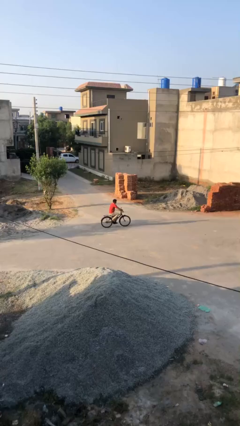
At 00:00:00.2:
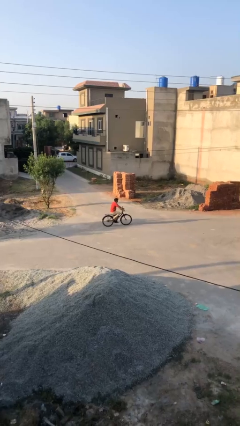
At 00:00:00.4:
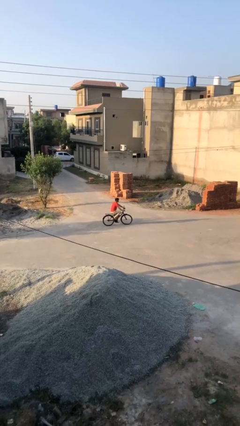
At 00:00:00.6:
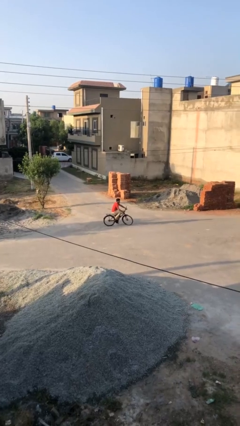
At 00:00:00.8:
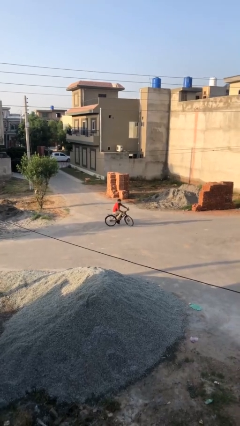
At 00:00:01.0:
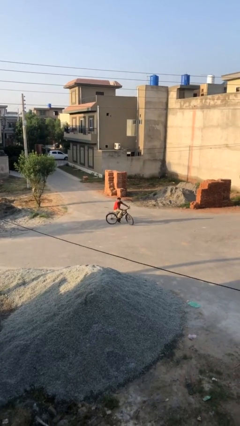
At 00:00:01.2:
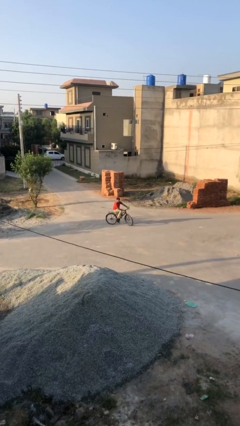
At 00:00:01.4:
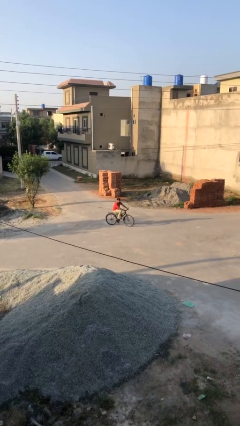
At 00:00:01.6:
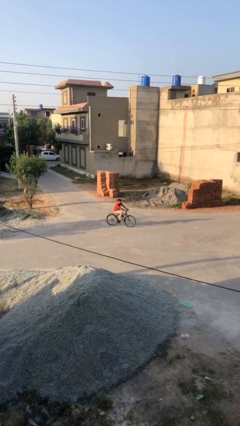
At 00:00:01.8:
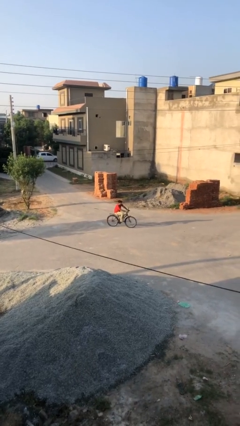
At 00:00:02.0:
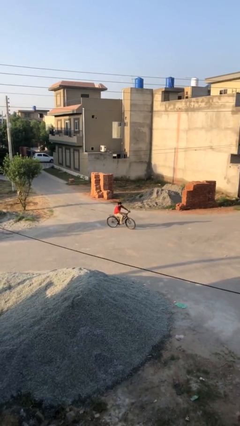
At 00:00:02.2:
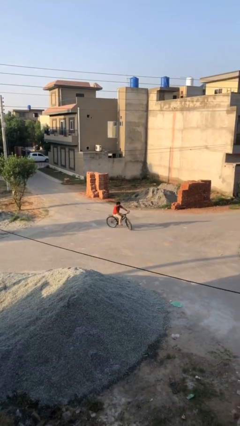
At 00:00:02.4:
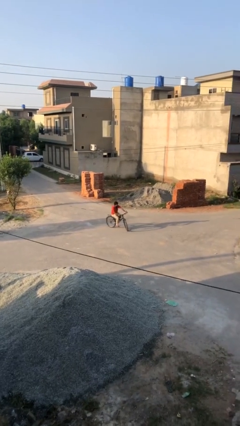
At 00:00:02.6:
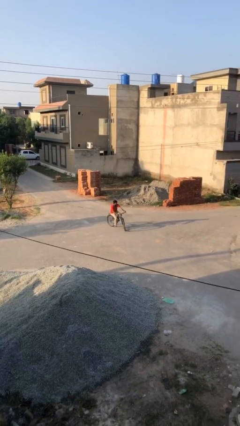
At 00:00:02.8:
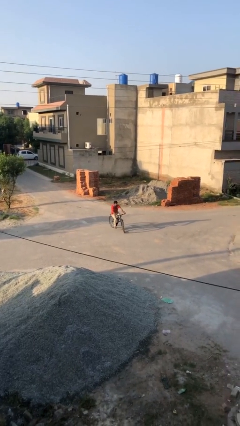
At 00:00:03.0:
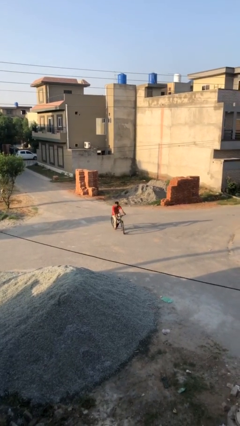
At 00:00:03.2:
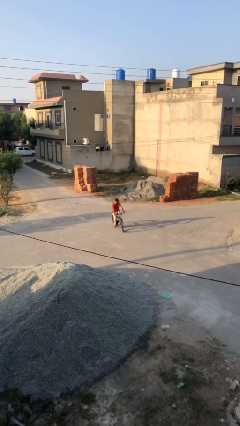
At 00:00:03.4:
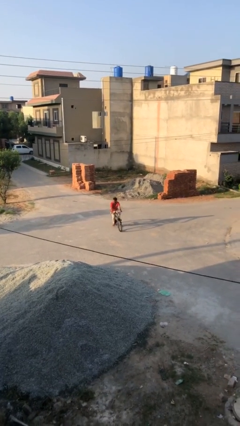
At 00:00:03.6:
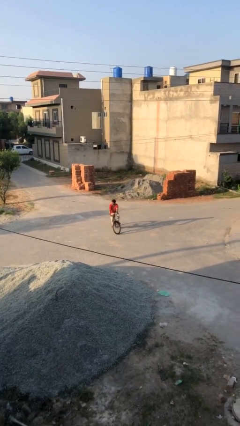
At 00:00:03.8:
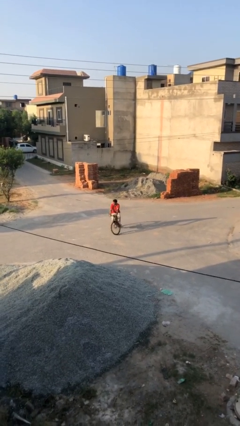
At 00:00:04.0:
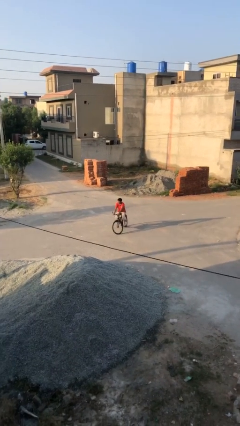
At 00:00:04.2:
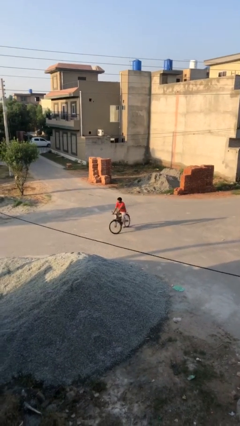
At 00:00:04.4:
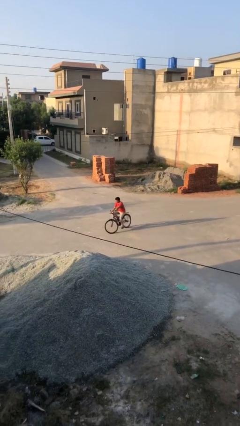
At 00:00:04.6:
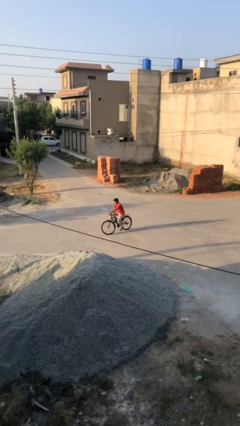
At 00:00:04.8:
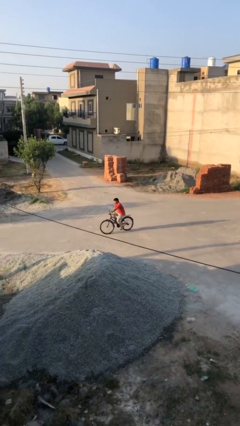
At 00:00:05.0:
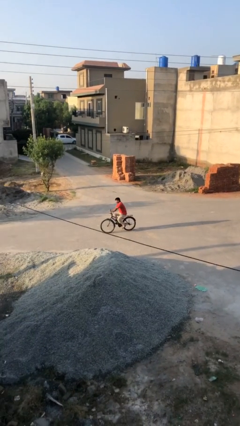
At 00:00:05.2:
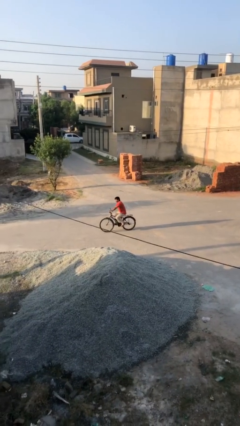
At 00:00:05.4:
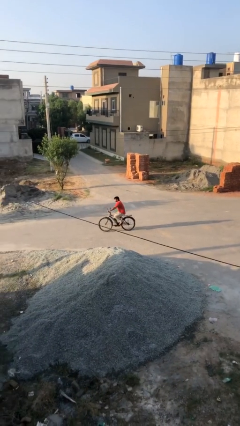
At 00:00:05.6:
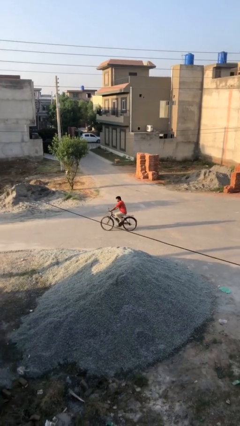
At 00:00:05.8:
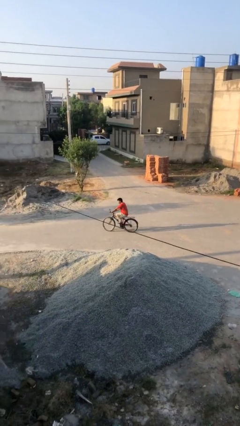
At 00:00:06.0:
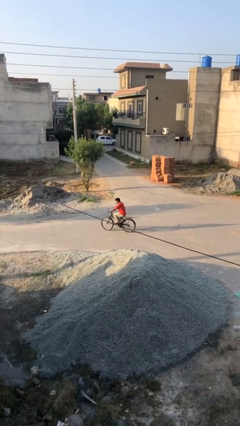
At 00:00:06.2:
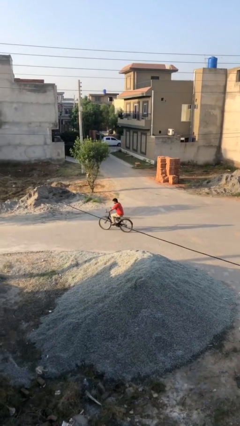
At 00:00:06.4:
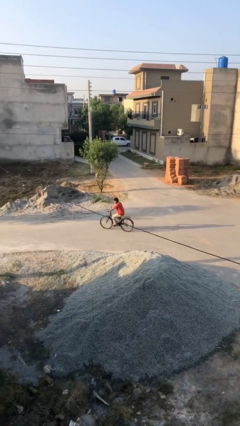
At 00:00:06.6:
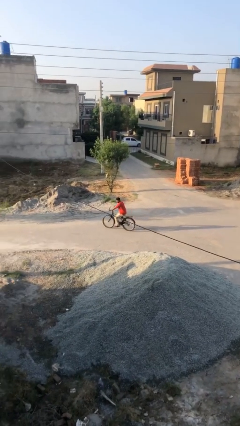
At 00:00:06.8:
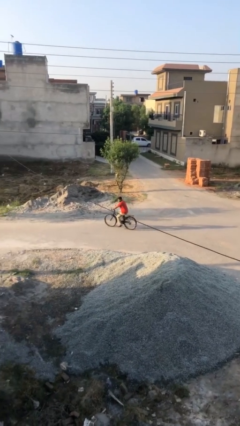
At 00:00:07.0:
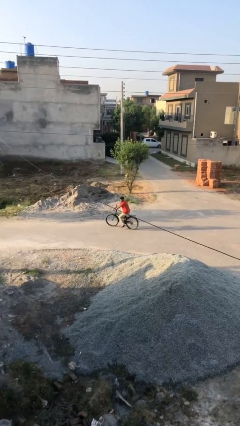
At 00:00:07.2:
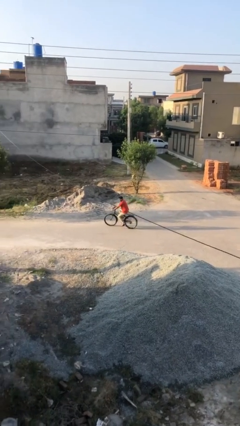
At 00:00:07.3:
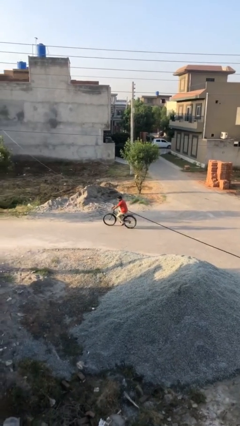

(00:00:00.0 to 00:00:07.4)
person rides bicycle

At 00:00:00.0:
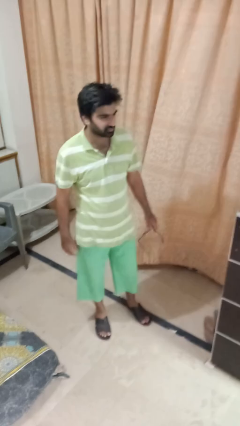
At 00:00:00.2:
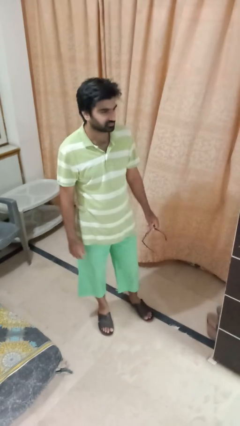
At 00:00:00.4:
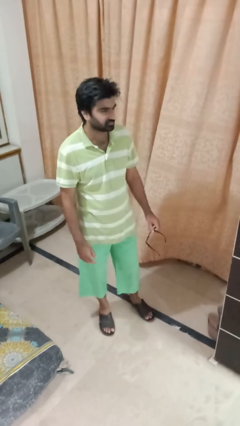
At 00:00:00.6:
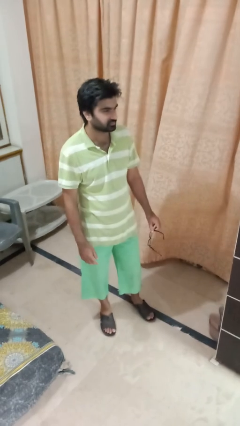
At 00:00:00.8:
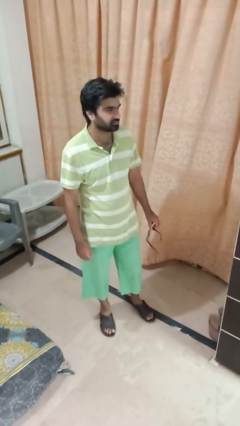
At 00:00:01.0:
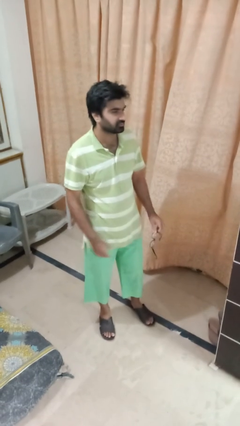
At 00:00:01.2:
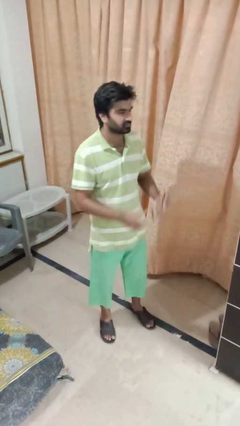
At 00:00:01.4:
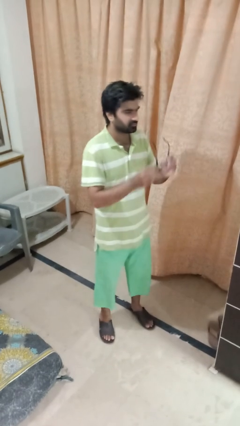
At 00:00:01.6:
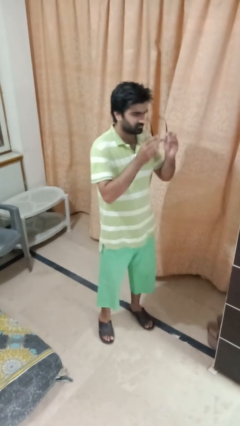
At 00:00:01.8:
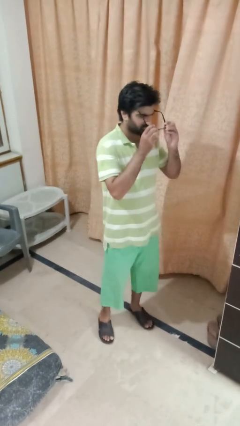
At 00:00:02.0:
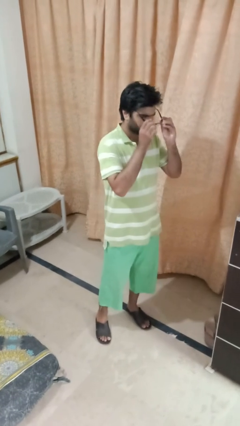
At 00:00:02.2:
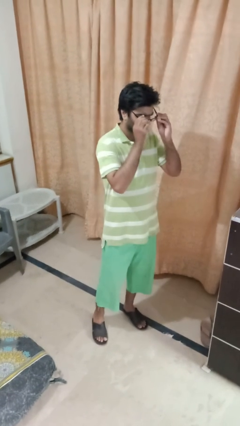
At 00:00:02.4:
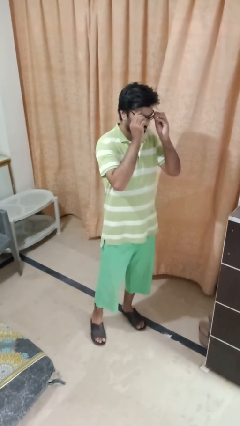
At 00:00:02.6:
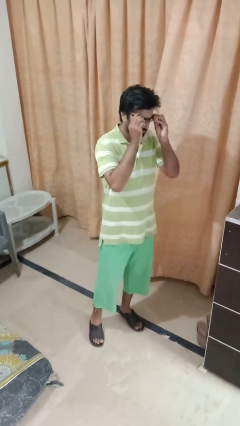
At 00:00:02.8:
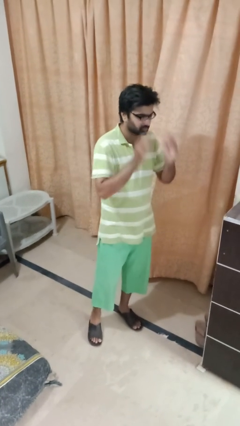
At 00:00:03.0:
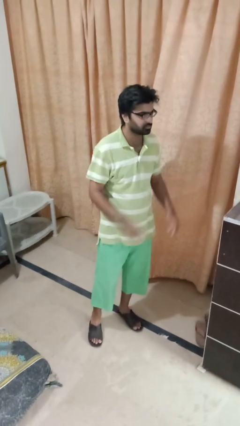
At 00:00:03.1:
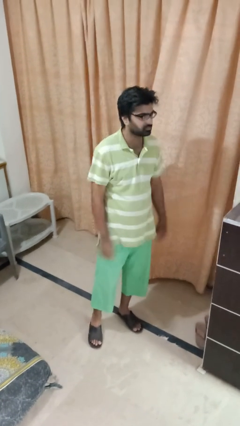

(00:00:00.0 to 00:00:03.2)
person puts on glasses

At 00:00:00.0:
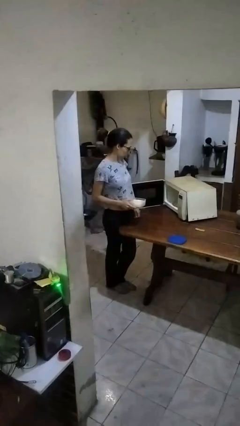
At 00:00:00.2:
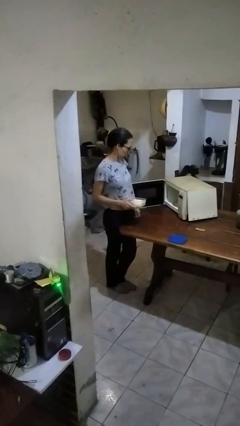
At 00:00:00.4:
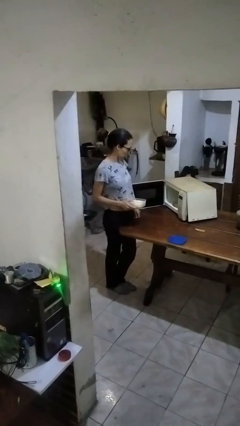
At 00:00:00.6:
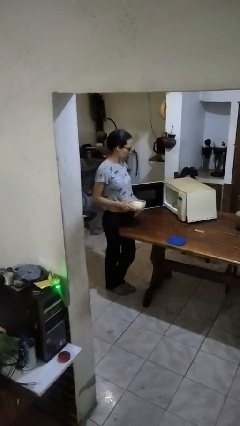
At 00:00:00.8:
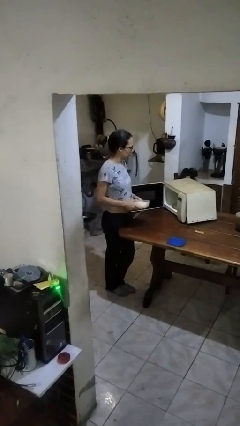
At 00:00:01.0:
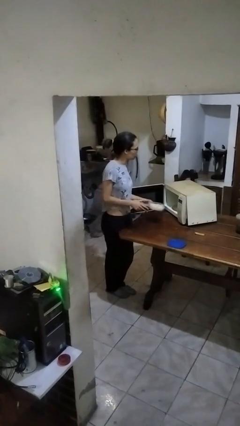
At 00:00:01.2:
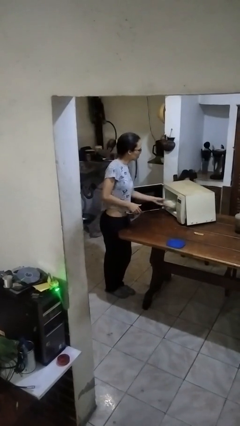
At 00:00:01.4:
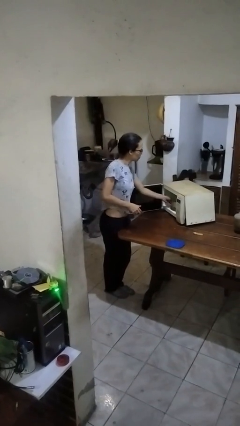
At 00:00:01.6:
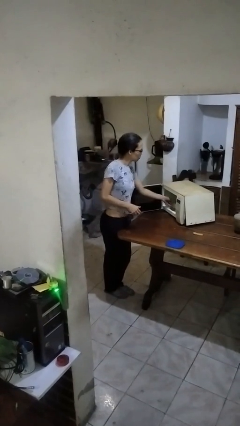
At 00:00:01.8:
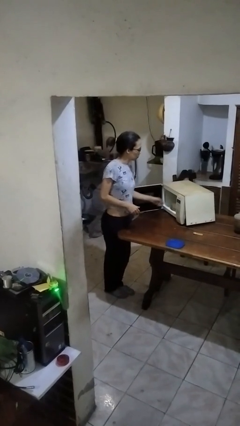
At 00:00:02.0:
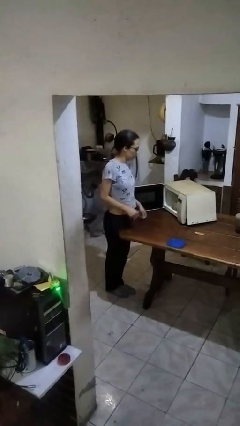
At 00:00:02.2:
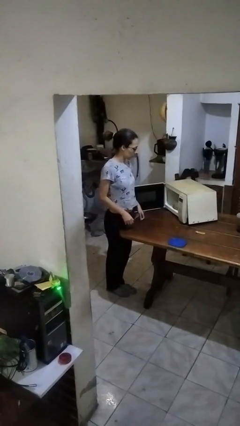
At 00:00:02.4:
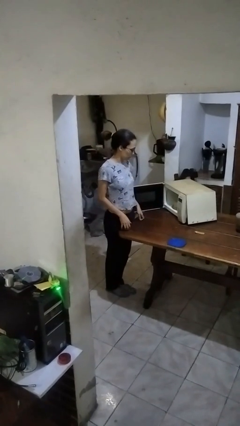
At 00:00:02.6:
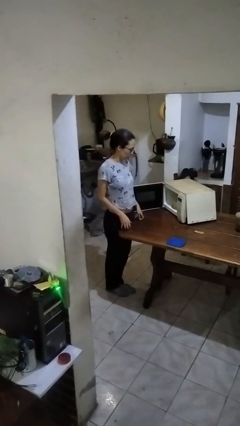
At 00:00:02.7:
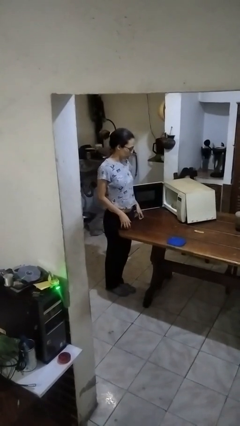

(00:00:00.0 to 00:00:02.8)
person puts object into microwave

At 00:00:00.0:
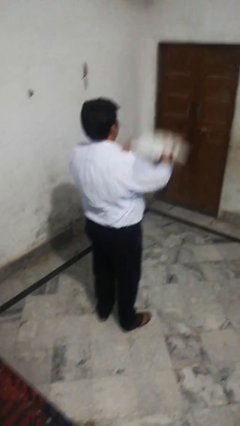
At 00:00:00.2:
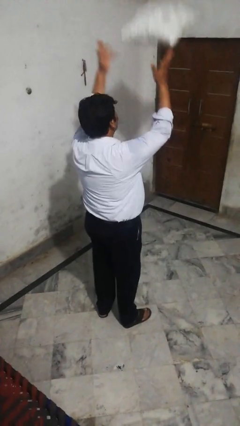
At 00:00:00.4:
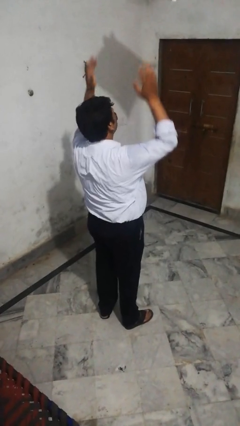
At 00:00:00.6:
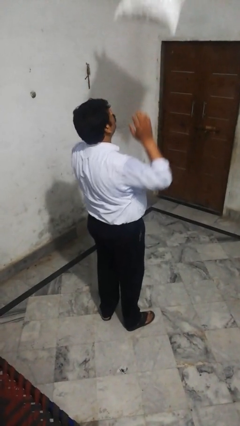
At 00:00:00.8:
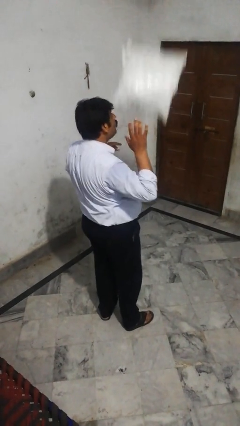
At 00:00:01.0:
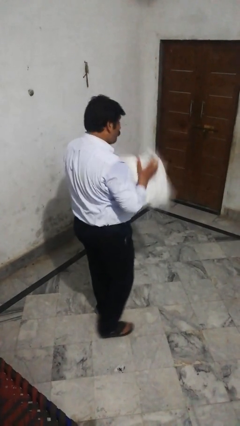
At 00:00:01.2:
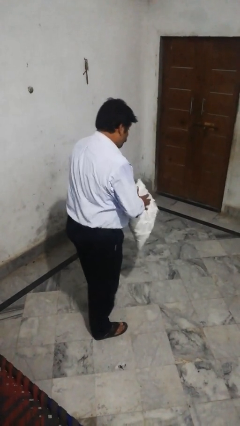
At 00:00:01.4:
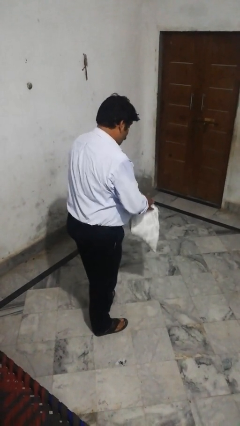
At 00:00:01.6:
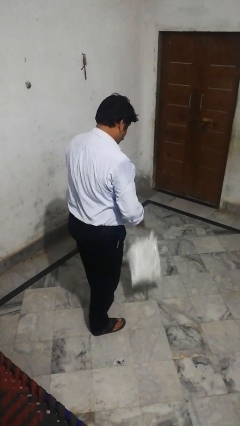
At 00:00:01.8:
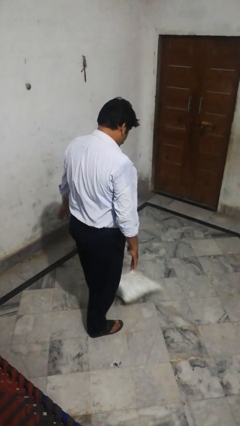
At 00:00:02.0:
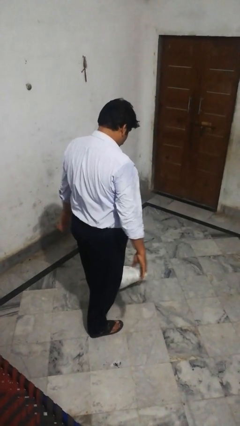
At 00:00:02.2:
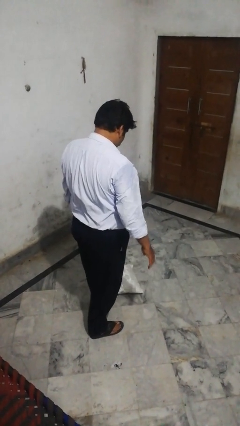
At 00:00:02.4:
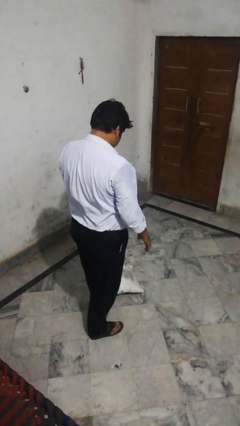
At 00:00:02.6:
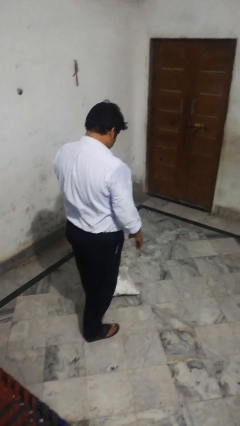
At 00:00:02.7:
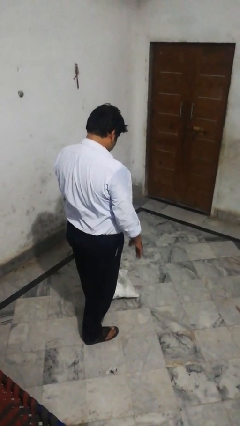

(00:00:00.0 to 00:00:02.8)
person throws object into air

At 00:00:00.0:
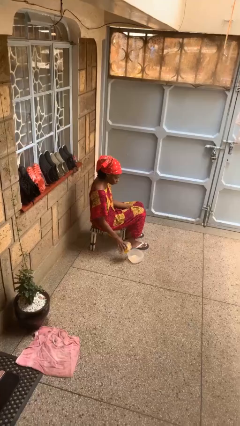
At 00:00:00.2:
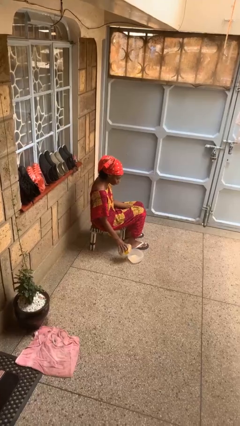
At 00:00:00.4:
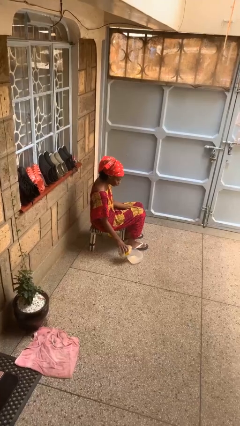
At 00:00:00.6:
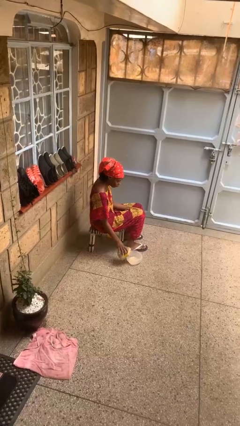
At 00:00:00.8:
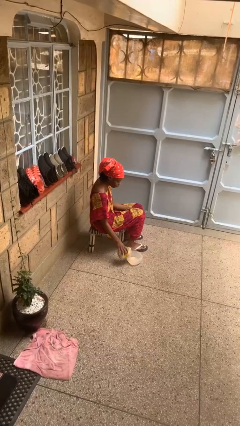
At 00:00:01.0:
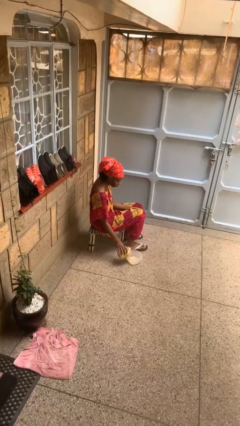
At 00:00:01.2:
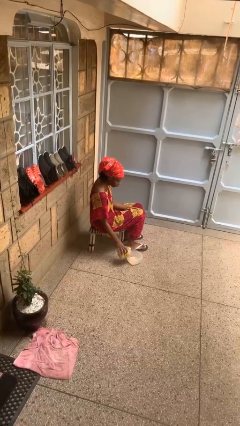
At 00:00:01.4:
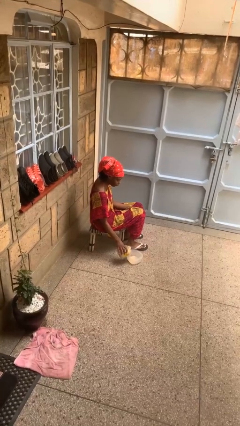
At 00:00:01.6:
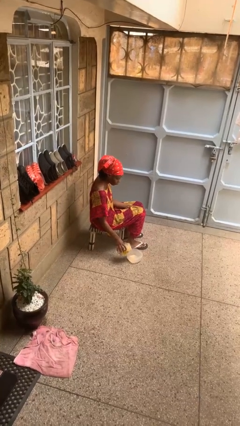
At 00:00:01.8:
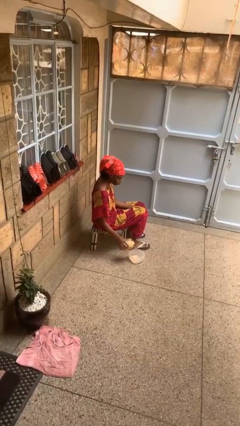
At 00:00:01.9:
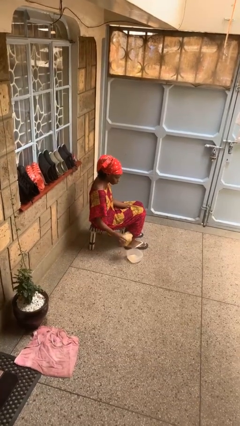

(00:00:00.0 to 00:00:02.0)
person pours into bowl
